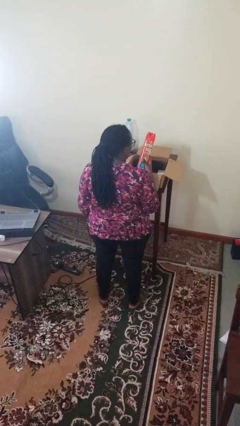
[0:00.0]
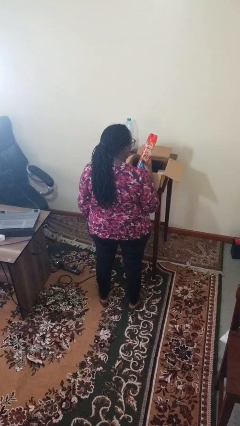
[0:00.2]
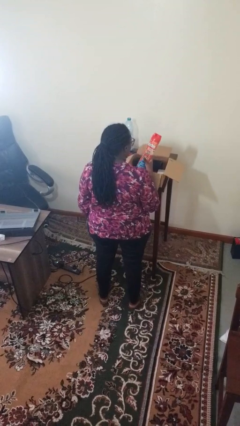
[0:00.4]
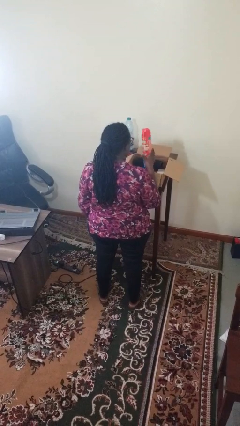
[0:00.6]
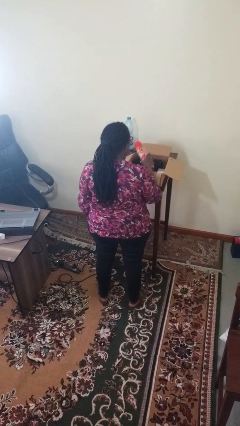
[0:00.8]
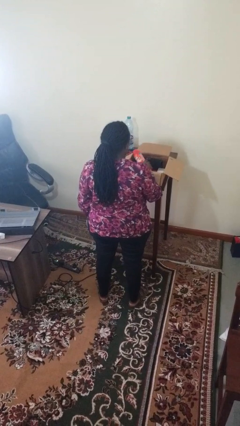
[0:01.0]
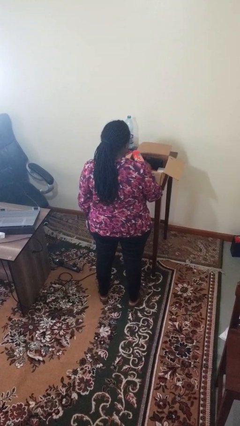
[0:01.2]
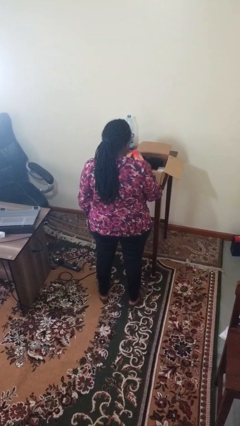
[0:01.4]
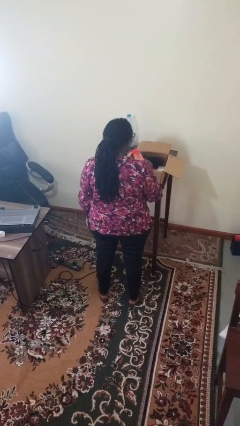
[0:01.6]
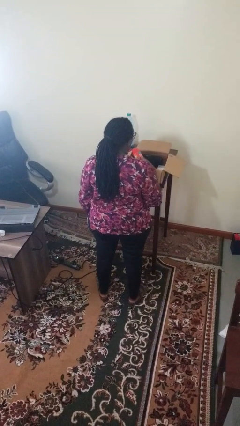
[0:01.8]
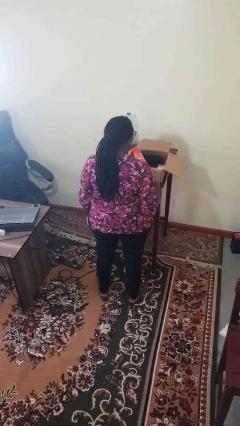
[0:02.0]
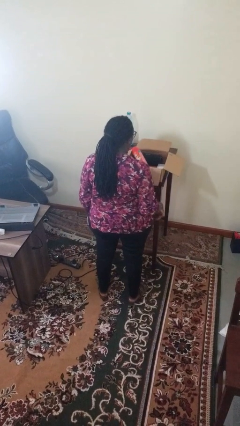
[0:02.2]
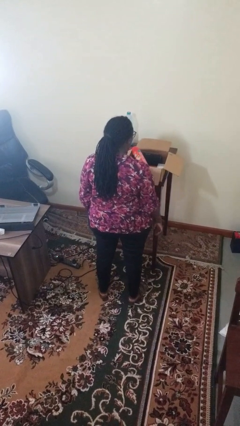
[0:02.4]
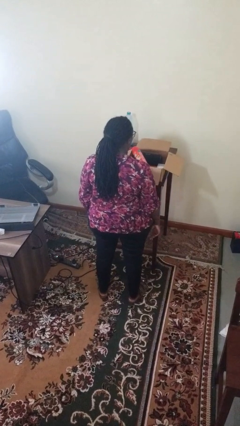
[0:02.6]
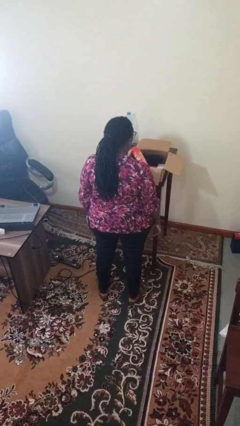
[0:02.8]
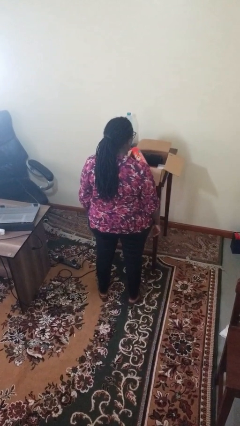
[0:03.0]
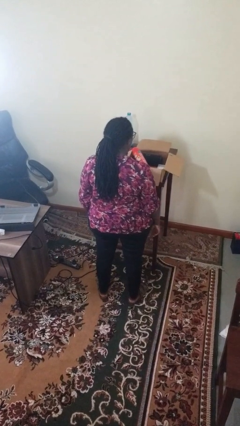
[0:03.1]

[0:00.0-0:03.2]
person puts object into box

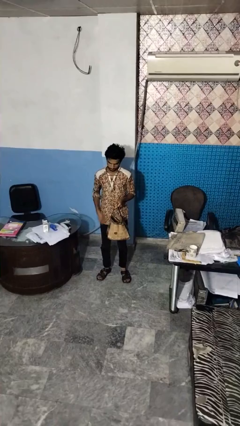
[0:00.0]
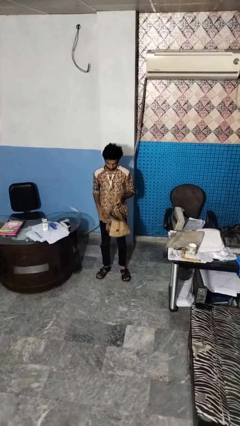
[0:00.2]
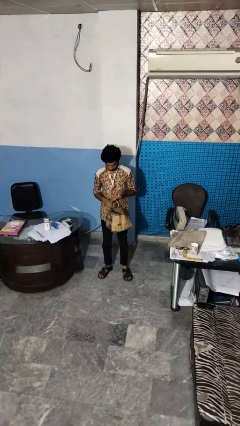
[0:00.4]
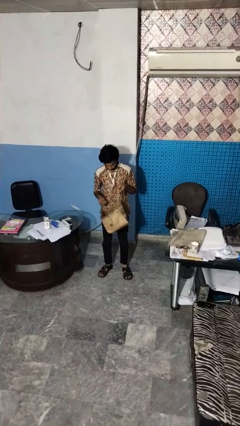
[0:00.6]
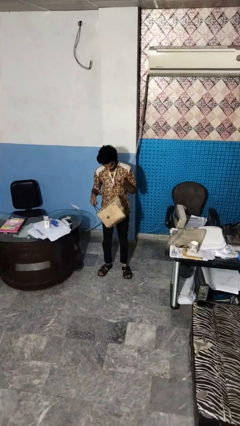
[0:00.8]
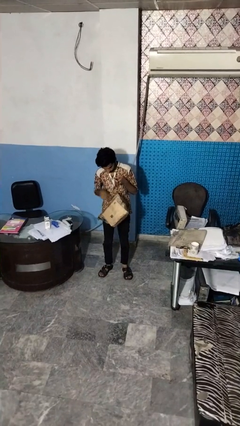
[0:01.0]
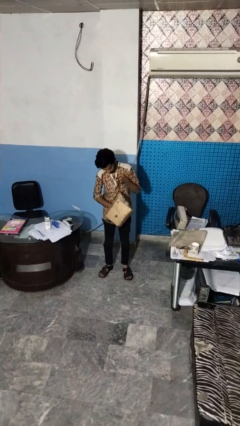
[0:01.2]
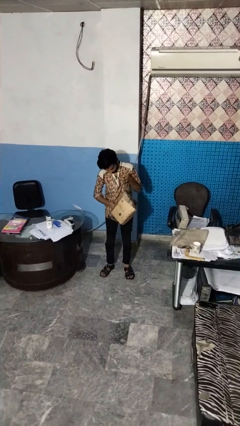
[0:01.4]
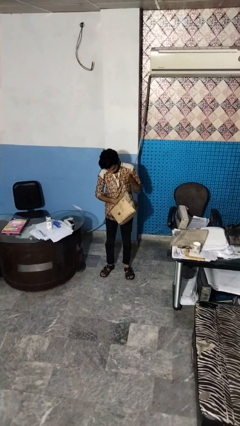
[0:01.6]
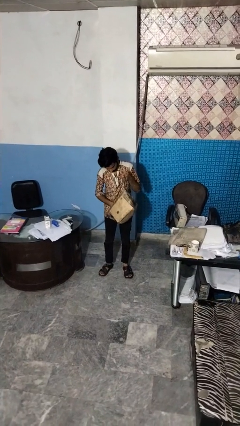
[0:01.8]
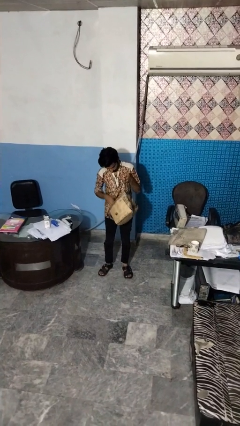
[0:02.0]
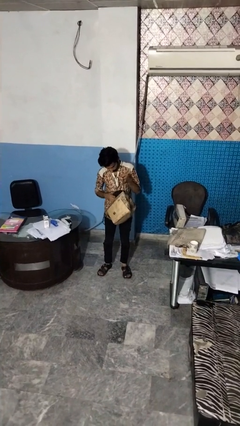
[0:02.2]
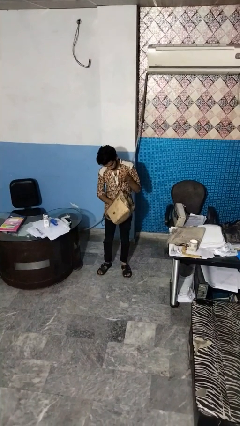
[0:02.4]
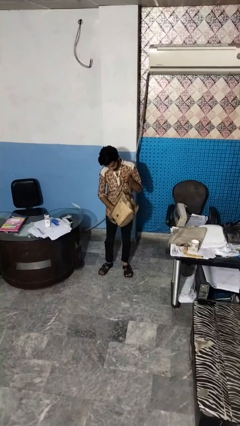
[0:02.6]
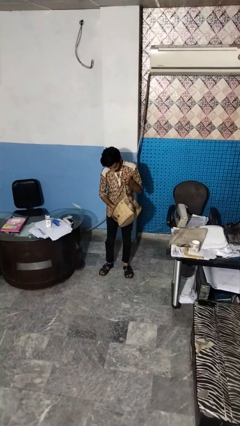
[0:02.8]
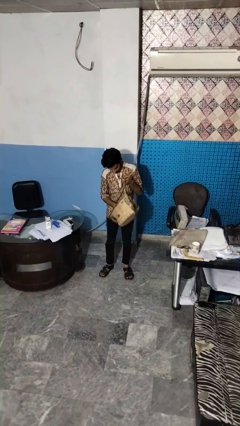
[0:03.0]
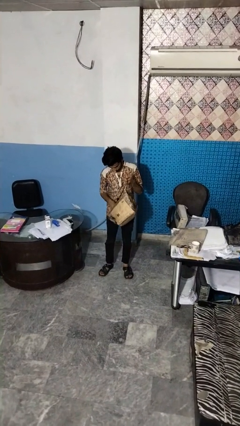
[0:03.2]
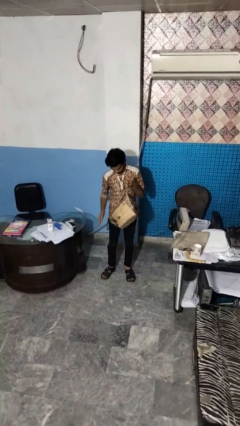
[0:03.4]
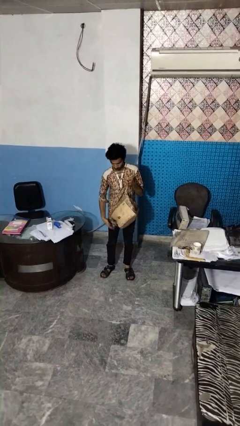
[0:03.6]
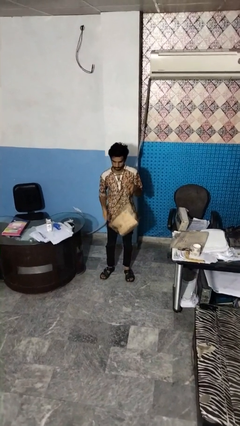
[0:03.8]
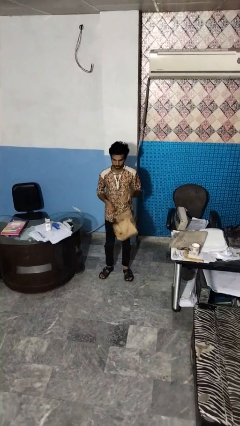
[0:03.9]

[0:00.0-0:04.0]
person searches in bag

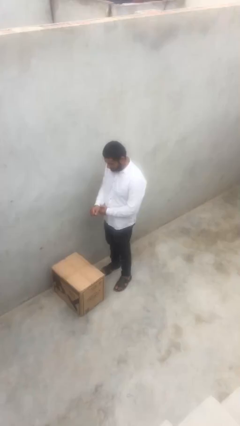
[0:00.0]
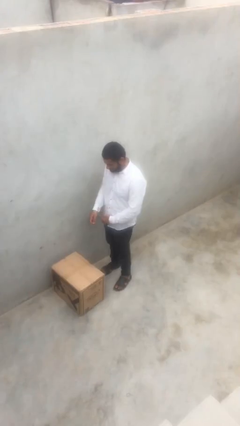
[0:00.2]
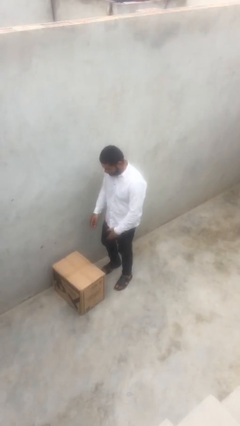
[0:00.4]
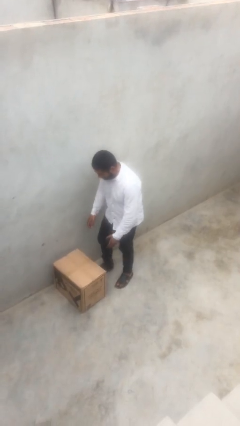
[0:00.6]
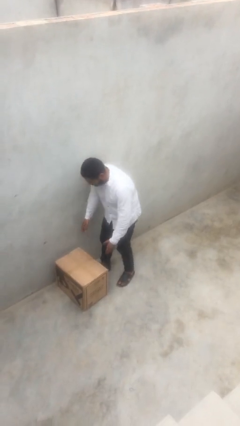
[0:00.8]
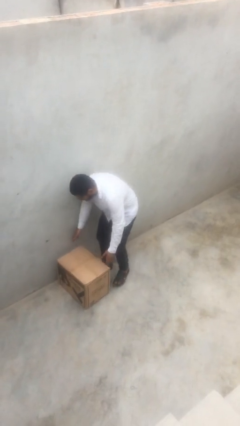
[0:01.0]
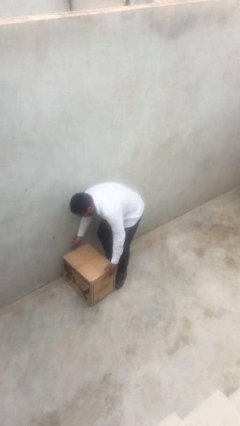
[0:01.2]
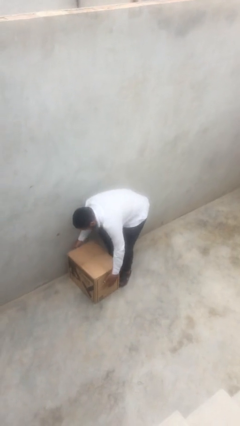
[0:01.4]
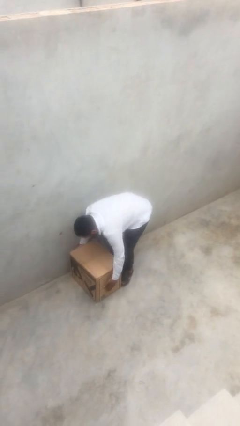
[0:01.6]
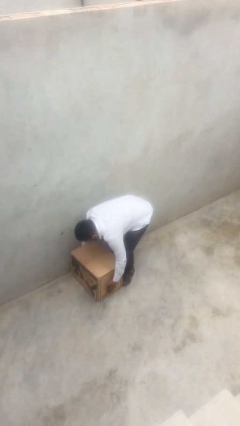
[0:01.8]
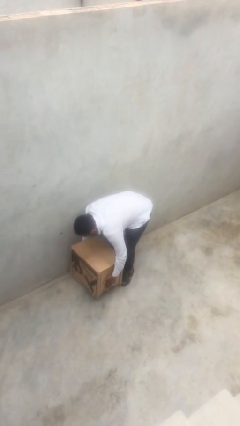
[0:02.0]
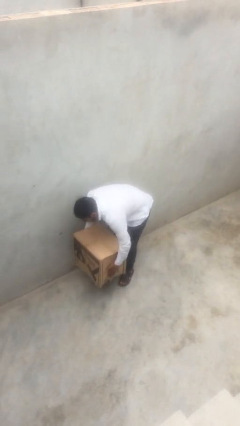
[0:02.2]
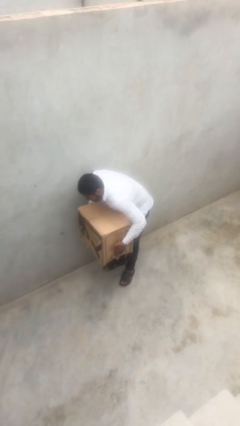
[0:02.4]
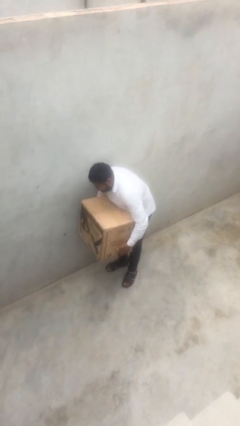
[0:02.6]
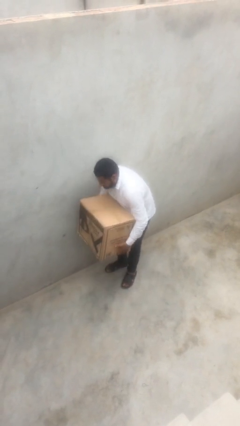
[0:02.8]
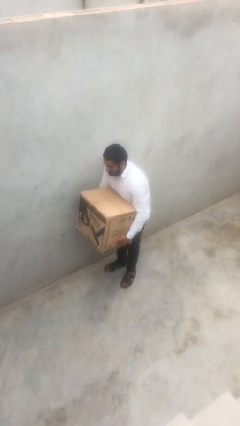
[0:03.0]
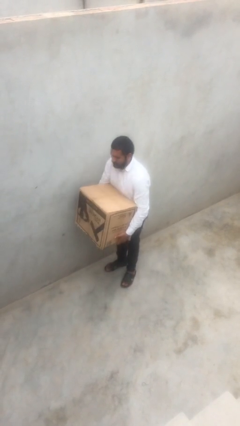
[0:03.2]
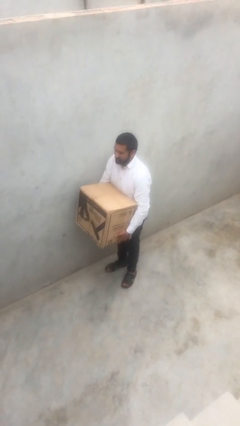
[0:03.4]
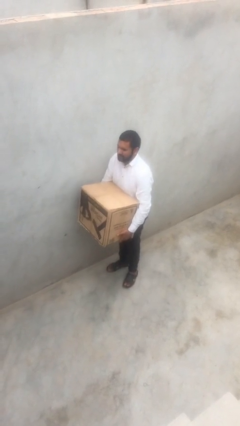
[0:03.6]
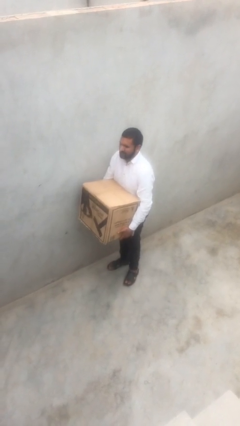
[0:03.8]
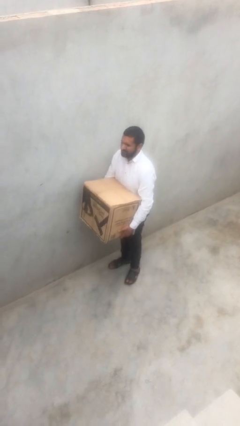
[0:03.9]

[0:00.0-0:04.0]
person picks up object from floor

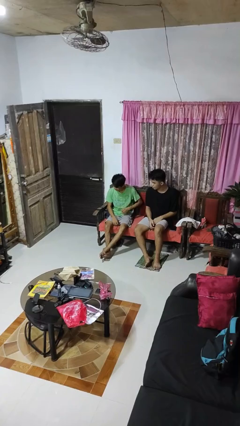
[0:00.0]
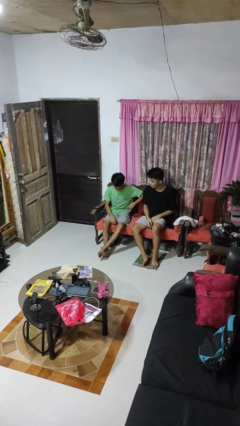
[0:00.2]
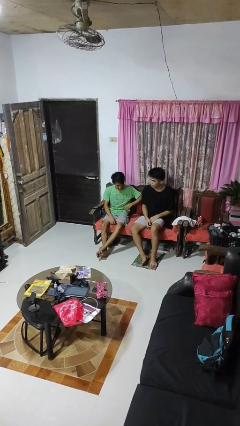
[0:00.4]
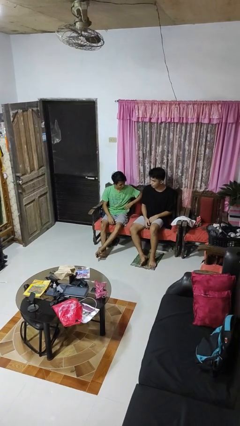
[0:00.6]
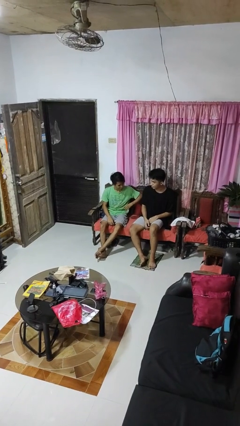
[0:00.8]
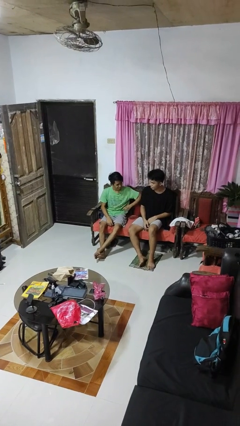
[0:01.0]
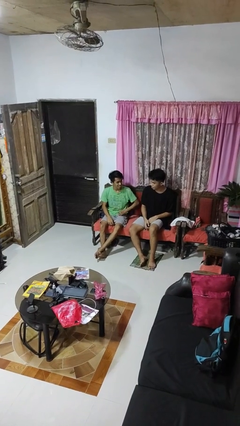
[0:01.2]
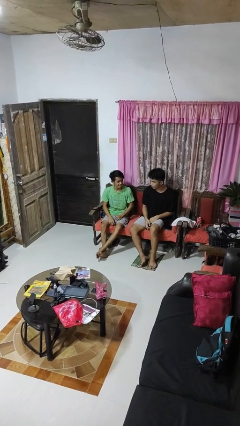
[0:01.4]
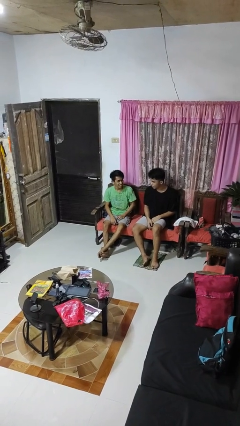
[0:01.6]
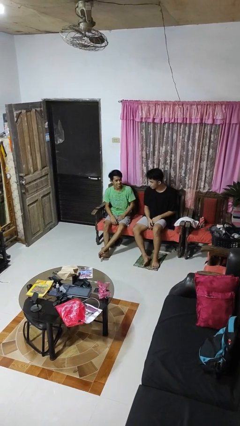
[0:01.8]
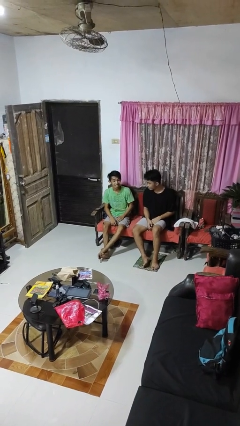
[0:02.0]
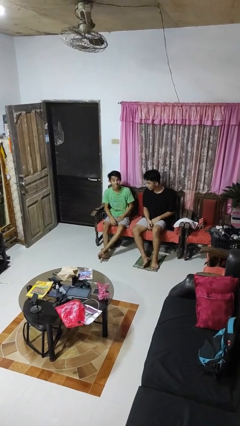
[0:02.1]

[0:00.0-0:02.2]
person nudges person with elbow

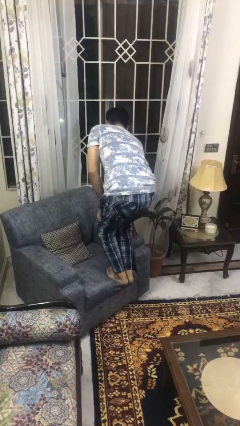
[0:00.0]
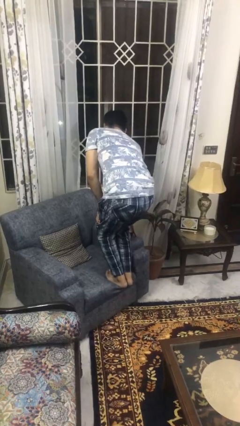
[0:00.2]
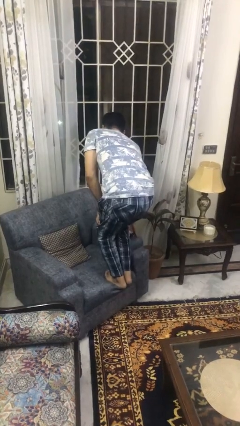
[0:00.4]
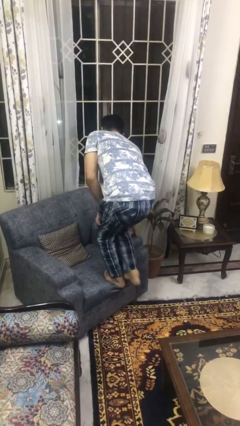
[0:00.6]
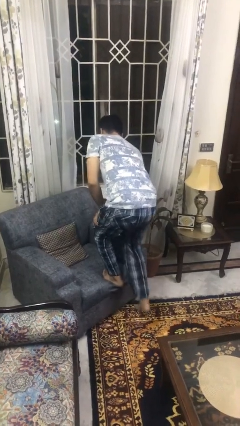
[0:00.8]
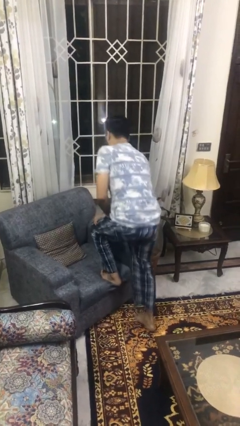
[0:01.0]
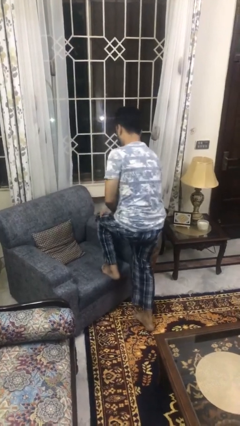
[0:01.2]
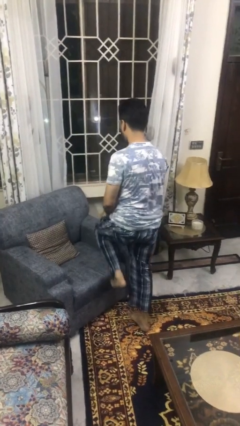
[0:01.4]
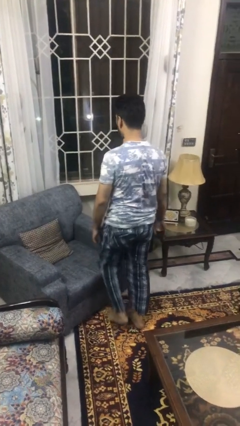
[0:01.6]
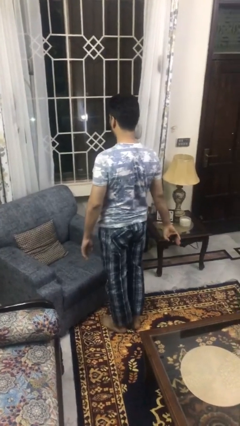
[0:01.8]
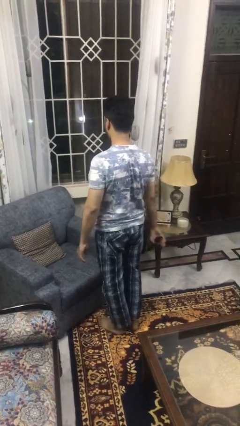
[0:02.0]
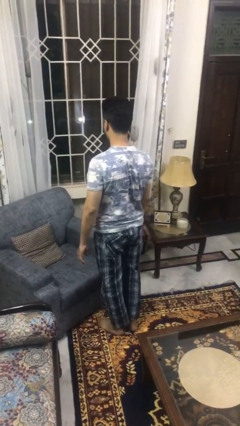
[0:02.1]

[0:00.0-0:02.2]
person climbs off couch

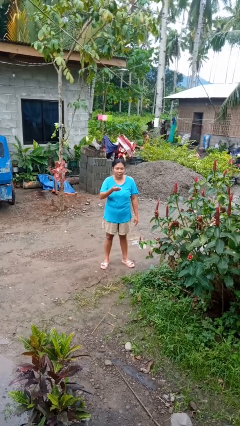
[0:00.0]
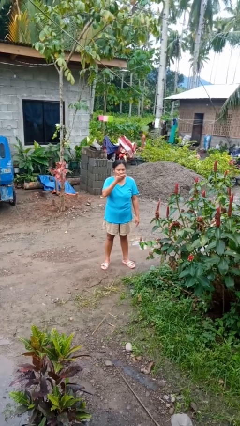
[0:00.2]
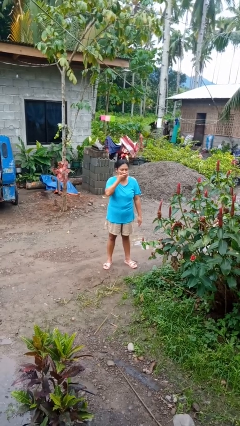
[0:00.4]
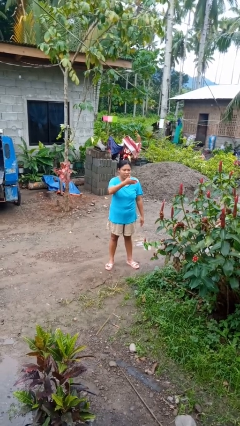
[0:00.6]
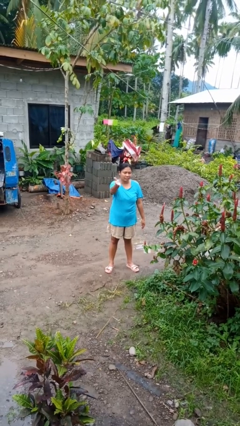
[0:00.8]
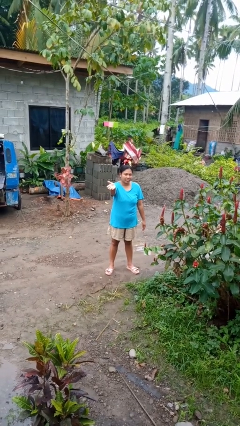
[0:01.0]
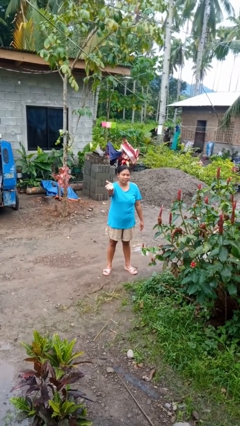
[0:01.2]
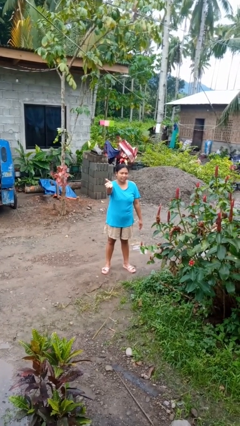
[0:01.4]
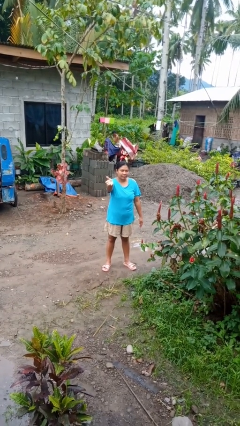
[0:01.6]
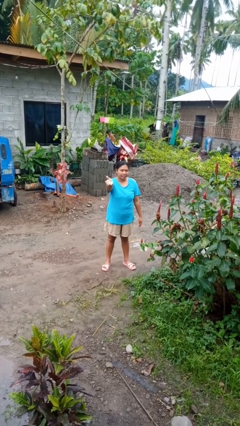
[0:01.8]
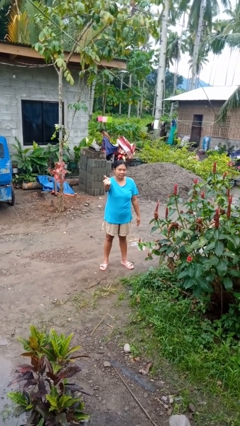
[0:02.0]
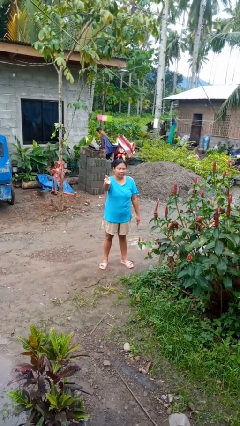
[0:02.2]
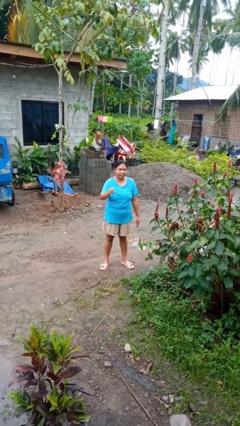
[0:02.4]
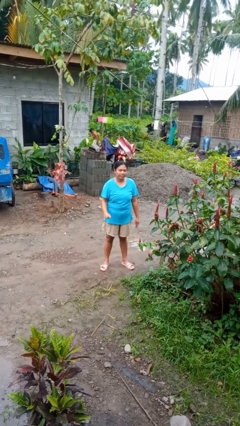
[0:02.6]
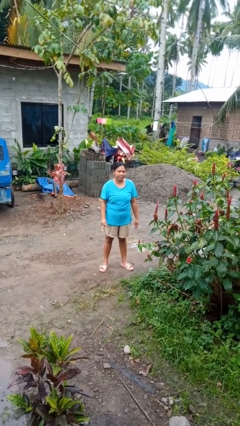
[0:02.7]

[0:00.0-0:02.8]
person gestures blow kiss
